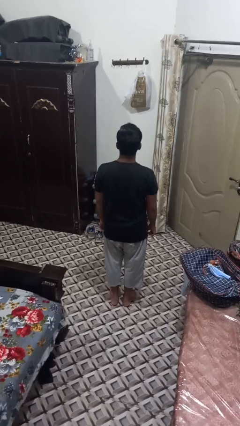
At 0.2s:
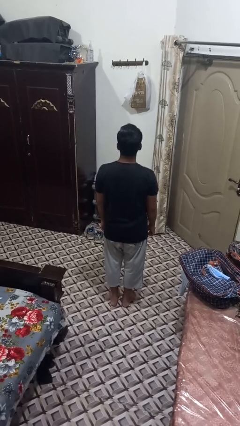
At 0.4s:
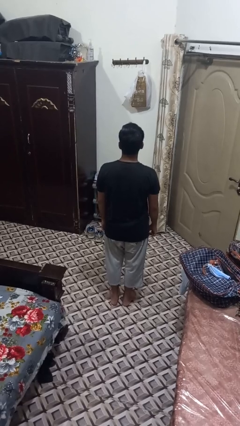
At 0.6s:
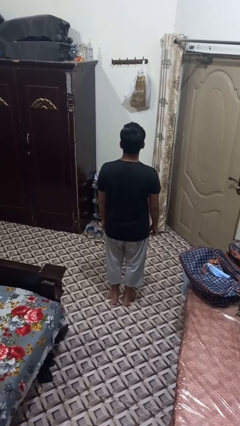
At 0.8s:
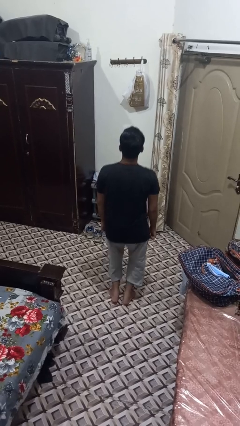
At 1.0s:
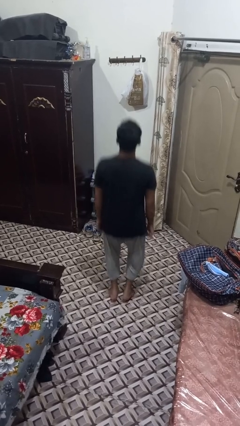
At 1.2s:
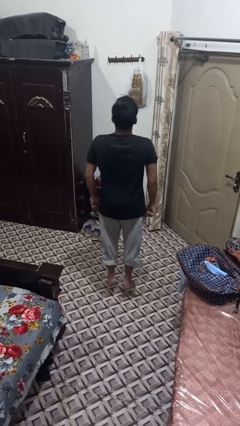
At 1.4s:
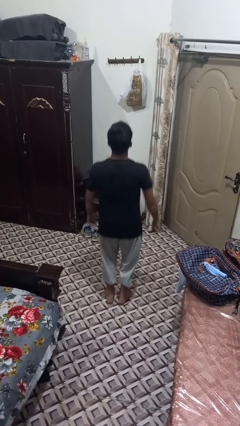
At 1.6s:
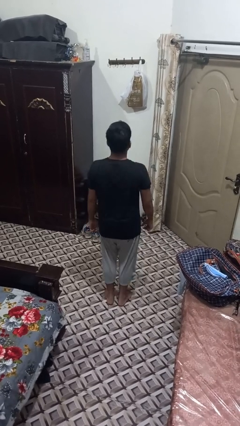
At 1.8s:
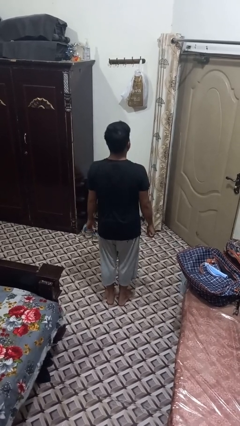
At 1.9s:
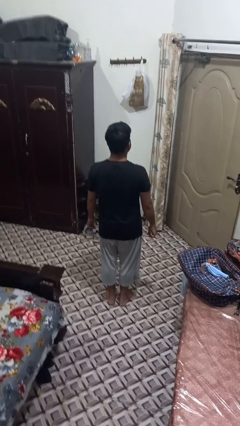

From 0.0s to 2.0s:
person jumps

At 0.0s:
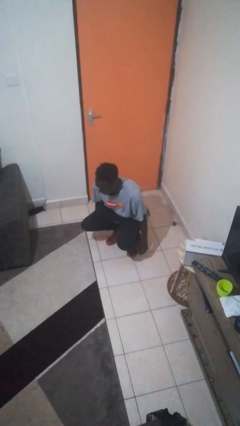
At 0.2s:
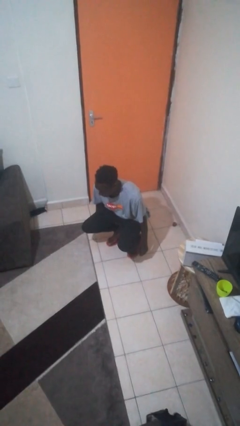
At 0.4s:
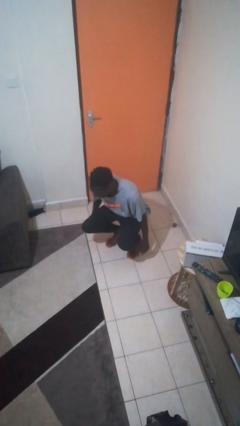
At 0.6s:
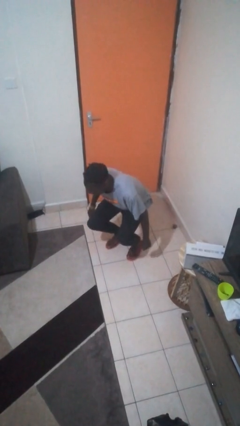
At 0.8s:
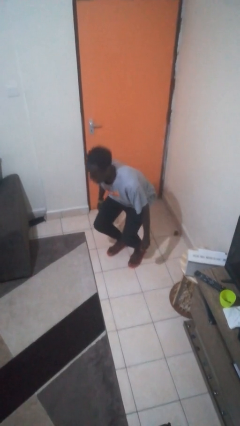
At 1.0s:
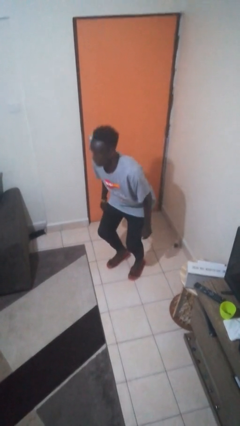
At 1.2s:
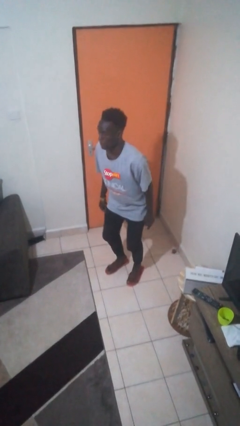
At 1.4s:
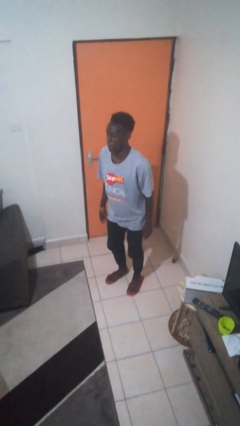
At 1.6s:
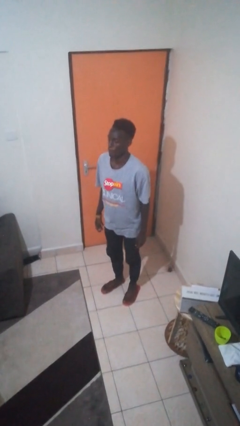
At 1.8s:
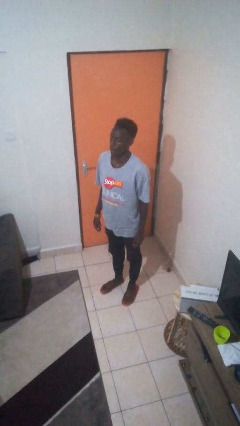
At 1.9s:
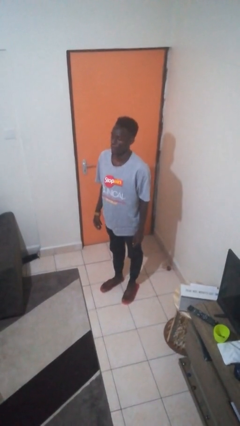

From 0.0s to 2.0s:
person stands up

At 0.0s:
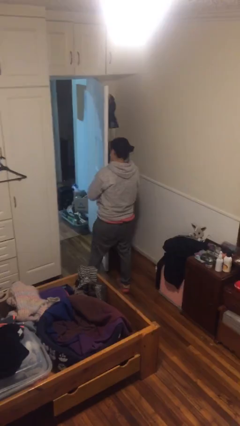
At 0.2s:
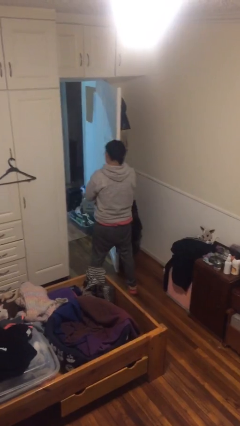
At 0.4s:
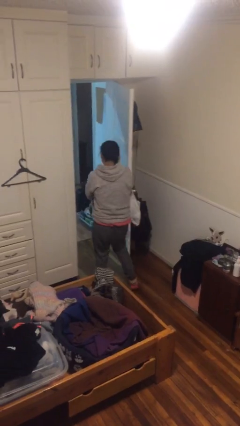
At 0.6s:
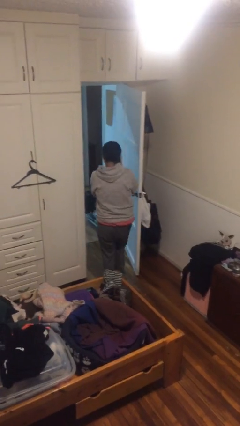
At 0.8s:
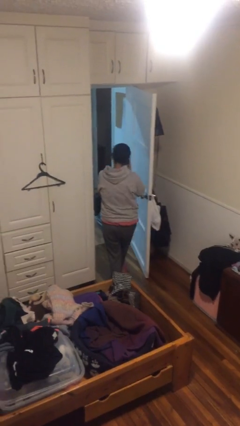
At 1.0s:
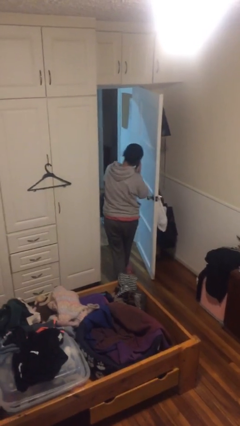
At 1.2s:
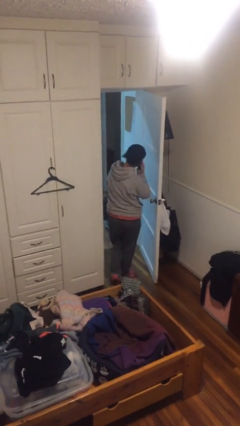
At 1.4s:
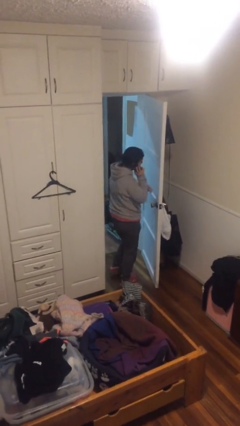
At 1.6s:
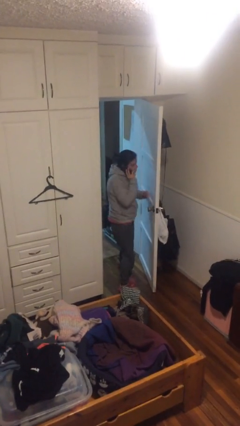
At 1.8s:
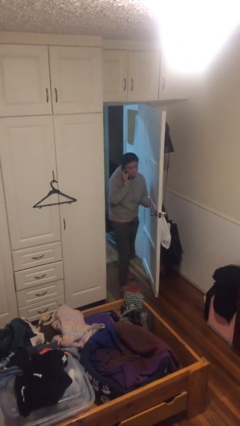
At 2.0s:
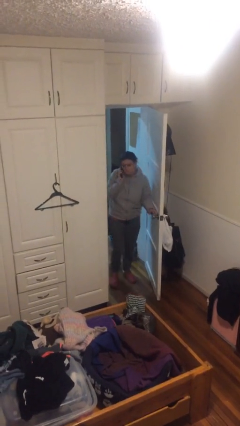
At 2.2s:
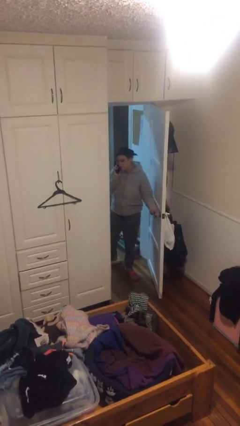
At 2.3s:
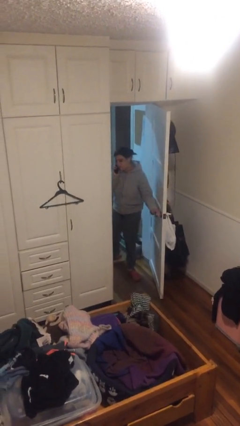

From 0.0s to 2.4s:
person exits scene through structure

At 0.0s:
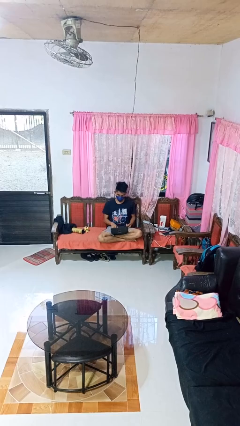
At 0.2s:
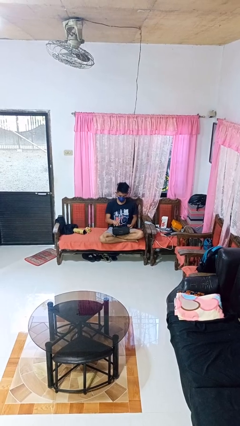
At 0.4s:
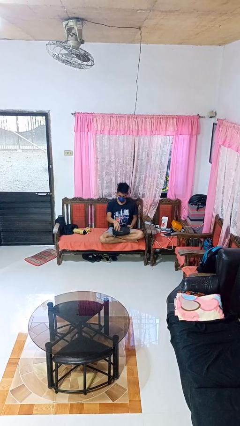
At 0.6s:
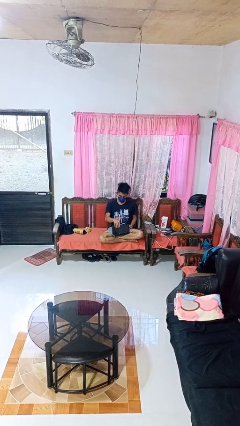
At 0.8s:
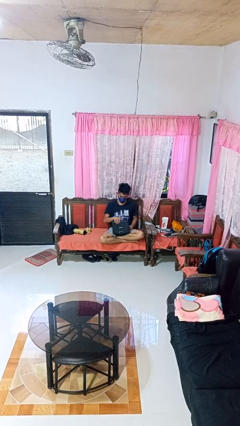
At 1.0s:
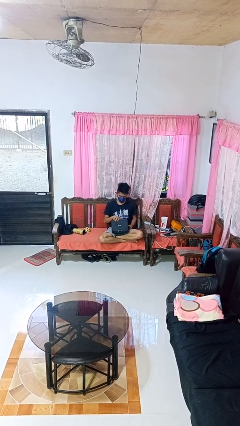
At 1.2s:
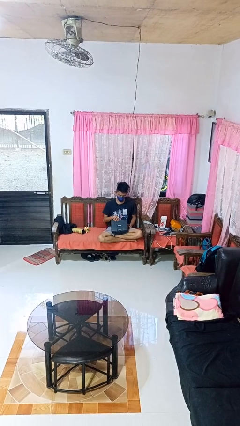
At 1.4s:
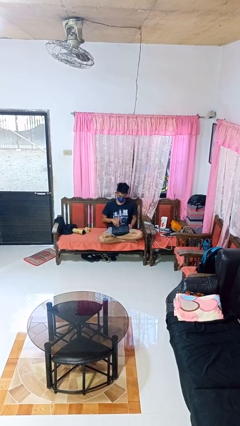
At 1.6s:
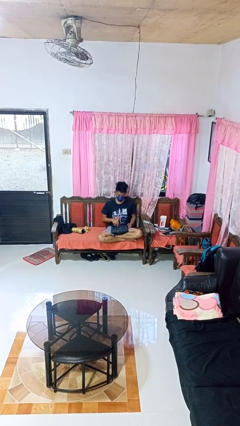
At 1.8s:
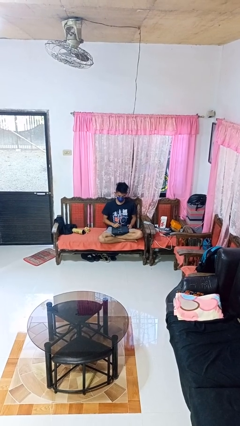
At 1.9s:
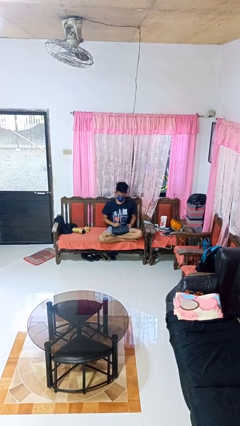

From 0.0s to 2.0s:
person closes laptop

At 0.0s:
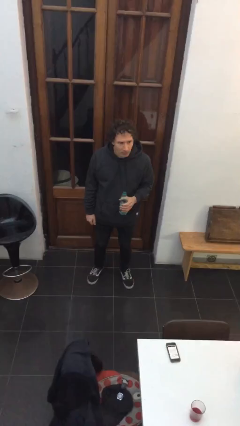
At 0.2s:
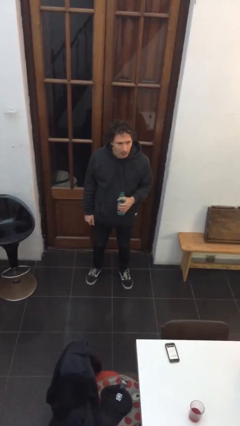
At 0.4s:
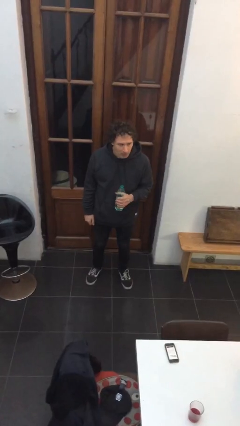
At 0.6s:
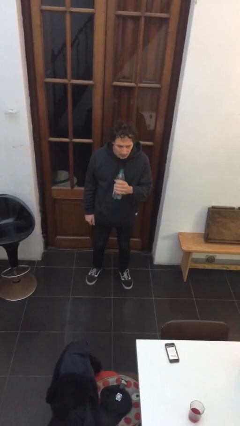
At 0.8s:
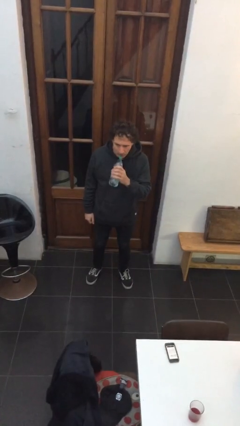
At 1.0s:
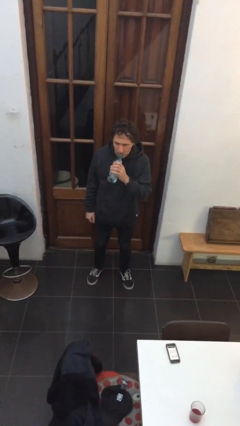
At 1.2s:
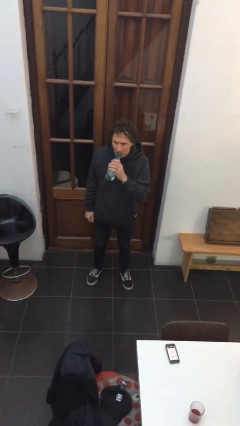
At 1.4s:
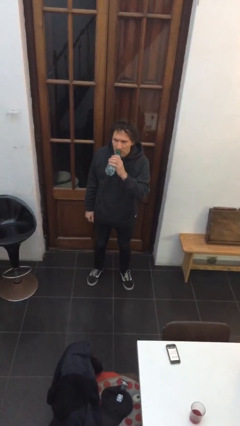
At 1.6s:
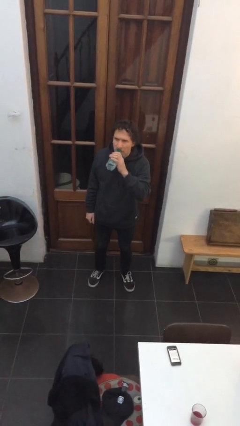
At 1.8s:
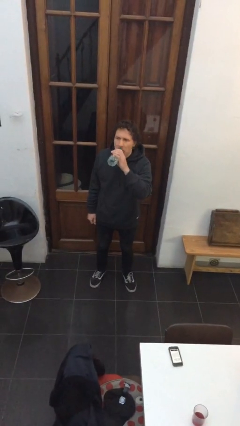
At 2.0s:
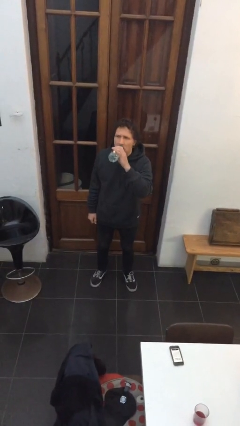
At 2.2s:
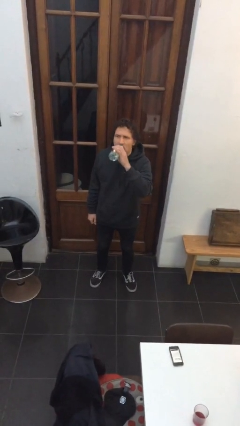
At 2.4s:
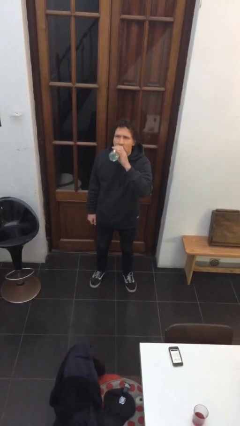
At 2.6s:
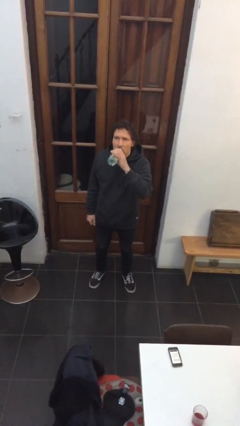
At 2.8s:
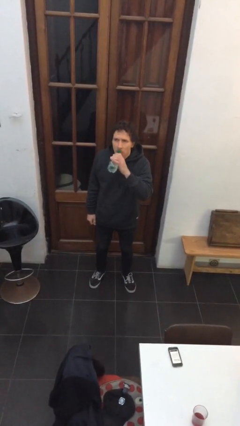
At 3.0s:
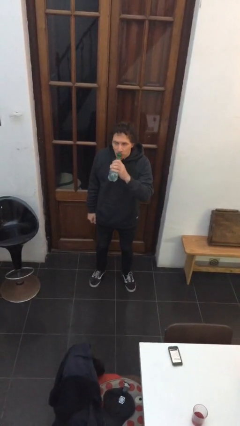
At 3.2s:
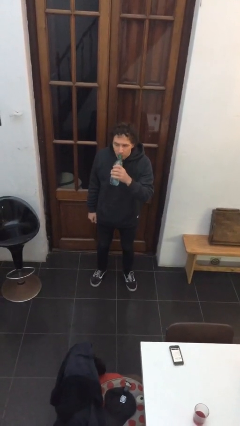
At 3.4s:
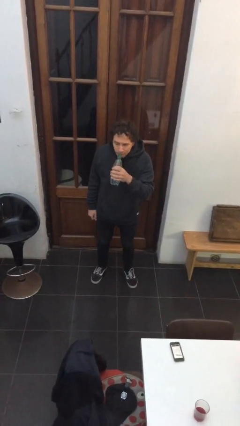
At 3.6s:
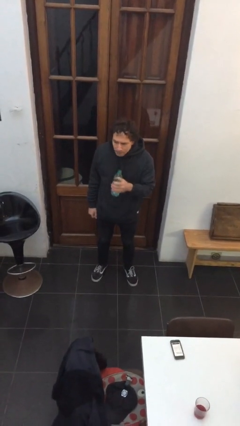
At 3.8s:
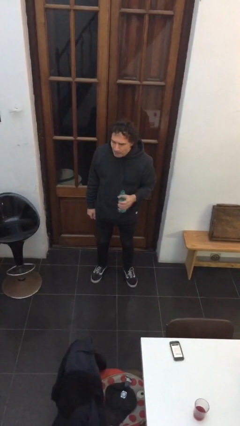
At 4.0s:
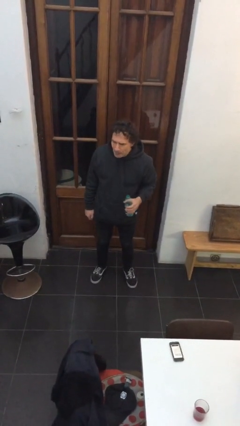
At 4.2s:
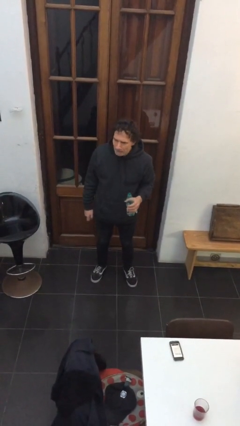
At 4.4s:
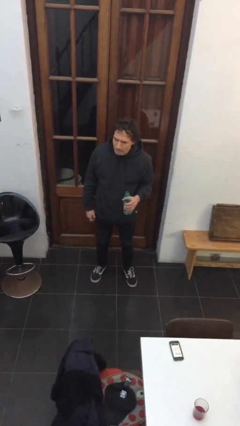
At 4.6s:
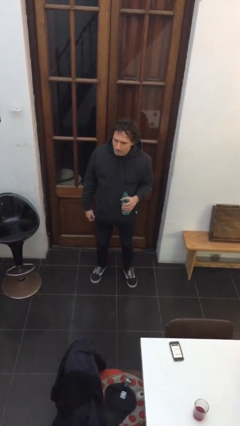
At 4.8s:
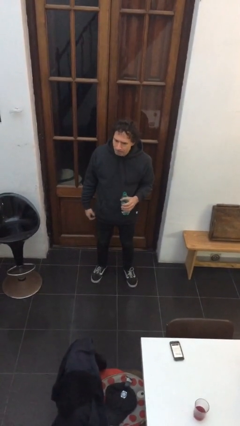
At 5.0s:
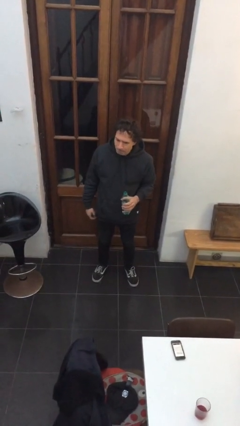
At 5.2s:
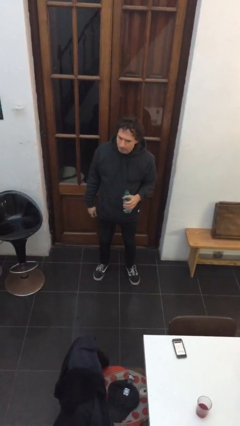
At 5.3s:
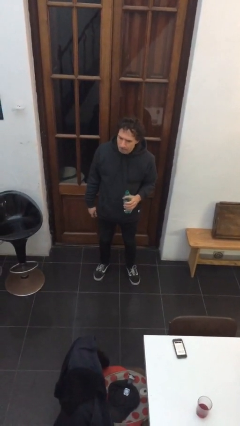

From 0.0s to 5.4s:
person drinks from bottle

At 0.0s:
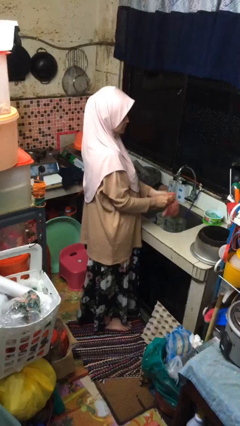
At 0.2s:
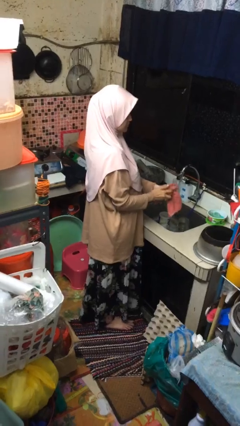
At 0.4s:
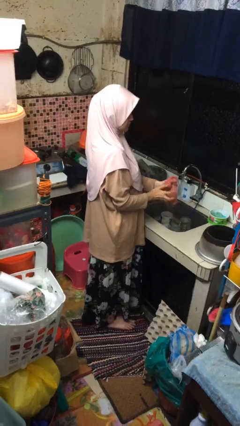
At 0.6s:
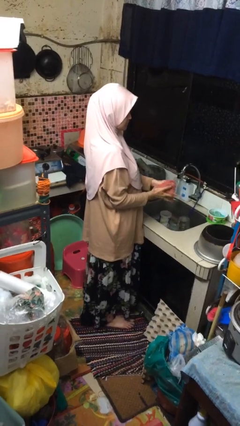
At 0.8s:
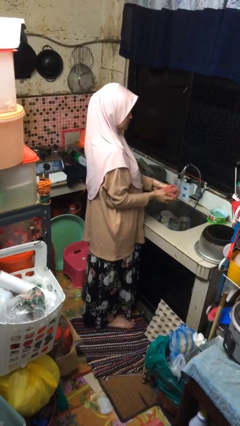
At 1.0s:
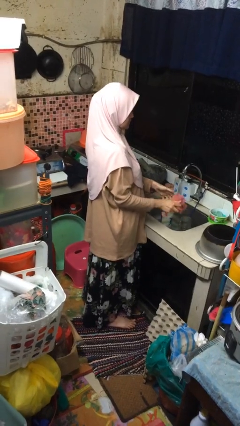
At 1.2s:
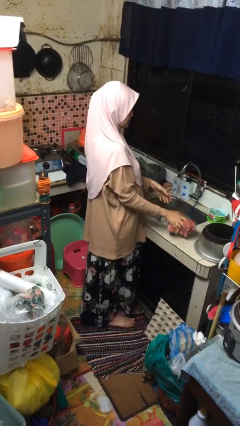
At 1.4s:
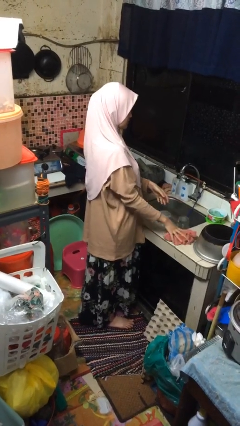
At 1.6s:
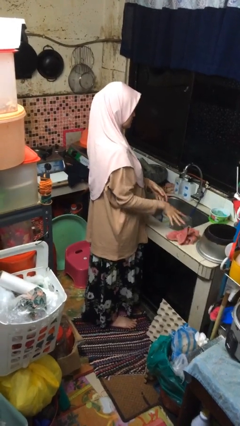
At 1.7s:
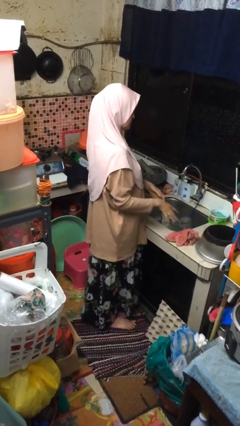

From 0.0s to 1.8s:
person dries hands with towel

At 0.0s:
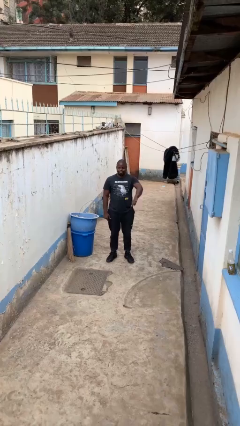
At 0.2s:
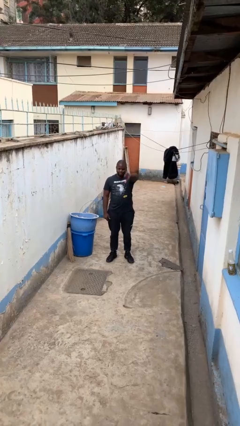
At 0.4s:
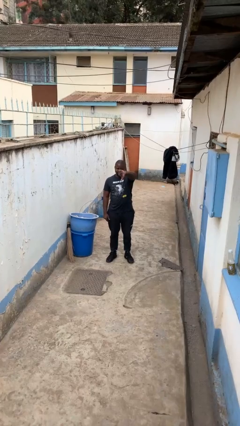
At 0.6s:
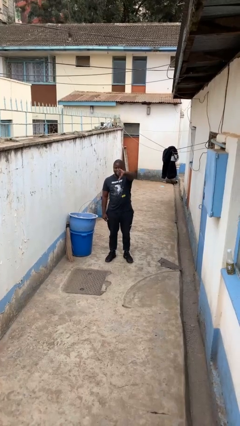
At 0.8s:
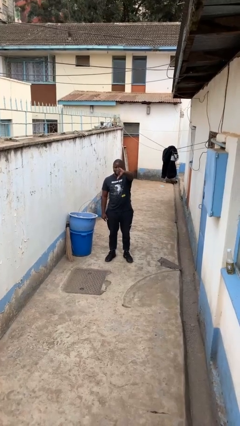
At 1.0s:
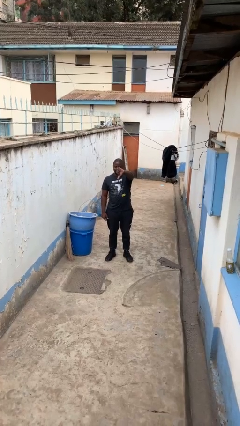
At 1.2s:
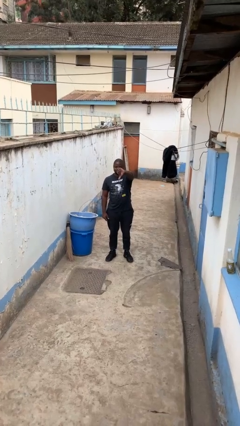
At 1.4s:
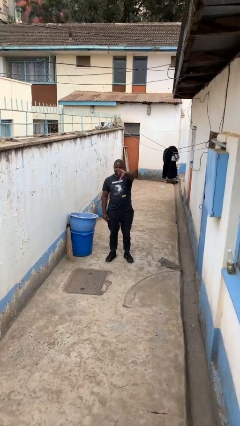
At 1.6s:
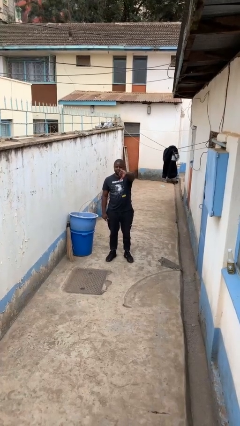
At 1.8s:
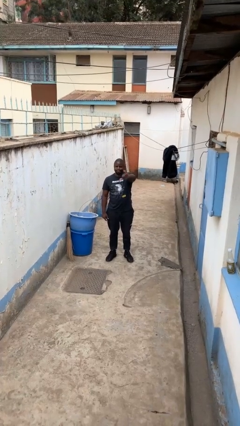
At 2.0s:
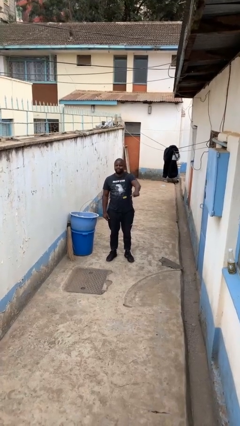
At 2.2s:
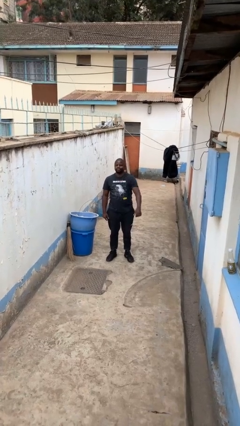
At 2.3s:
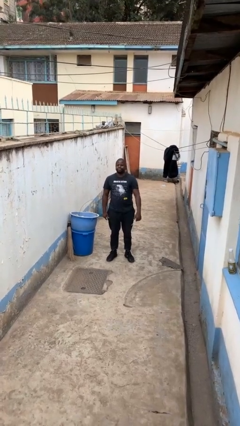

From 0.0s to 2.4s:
person gestures thumbs down
